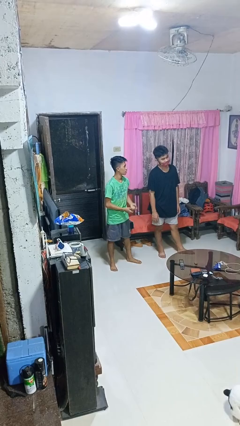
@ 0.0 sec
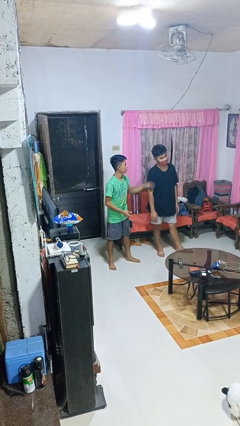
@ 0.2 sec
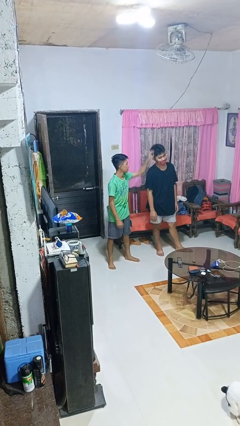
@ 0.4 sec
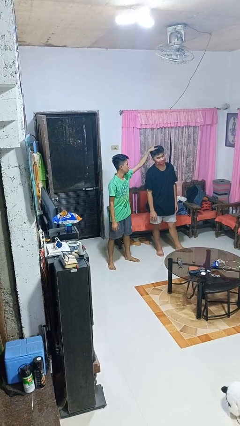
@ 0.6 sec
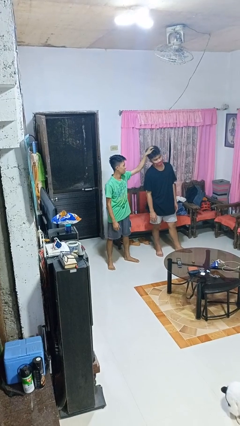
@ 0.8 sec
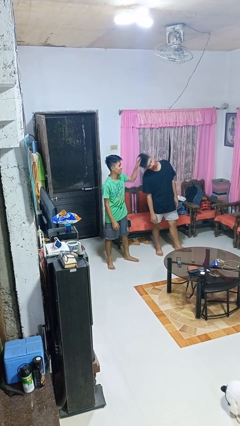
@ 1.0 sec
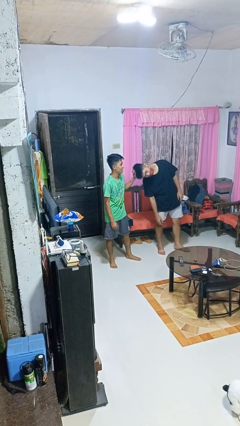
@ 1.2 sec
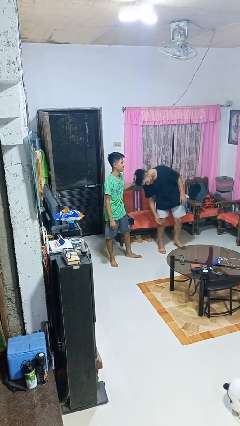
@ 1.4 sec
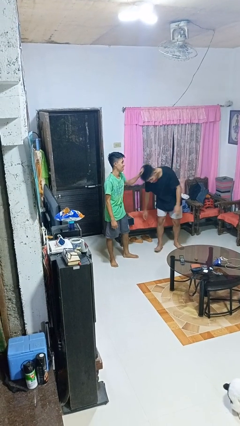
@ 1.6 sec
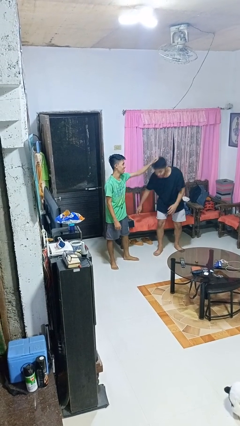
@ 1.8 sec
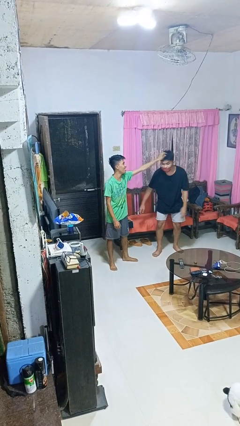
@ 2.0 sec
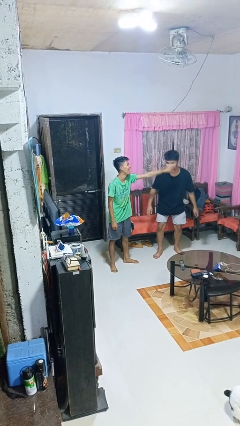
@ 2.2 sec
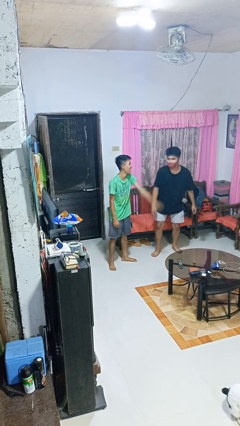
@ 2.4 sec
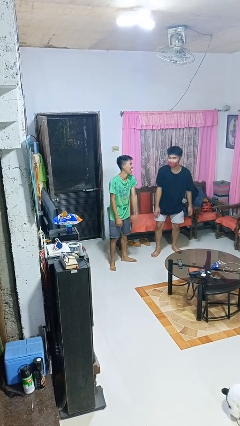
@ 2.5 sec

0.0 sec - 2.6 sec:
person grabs person by hair

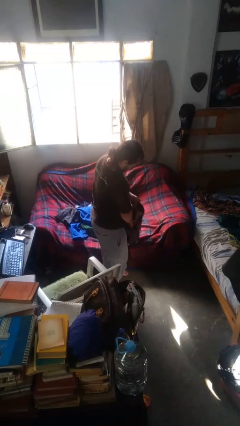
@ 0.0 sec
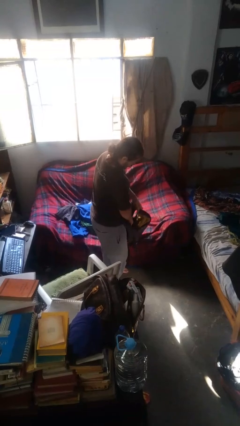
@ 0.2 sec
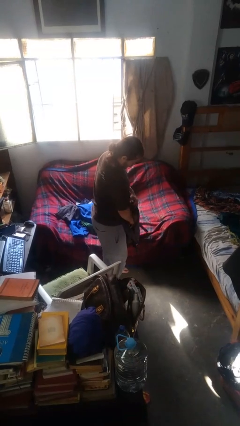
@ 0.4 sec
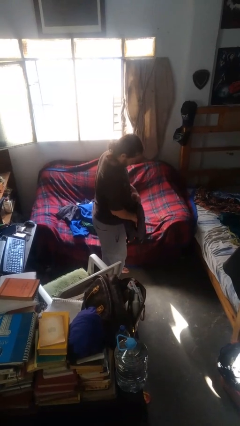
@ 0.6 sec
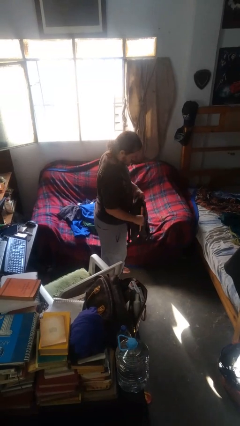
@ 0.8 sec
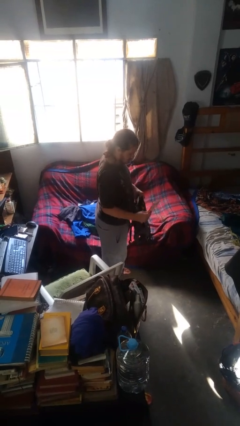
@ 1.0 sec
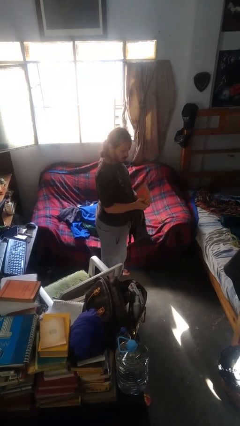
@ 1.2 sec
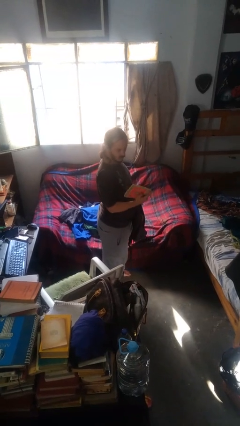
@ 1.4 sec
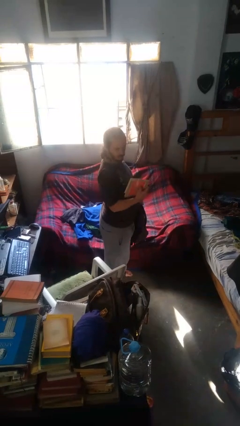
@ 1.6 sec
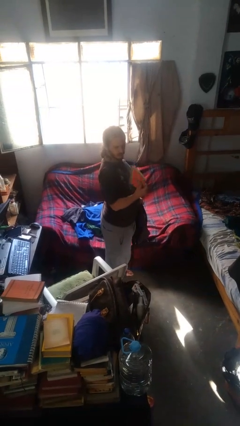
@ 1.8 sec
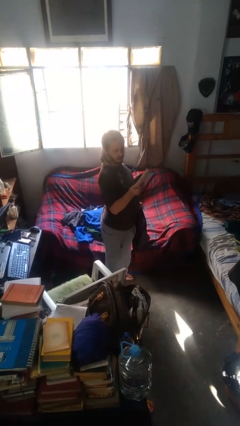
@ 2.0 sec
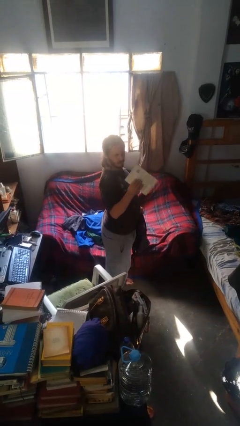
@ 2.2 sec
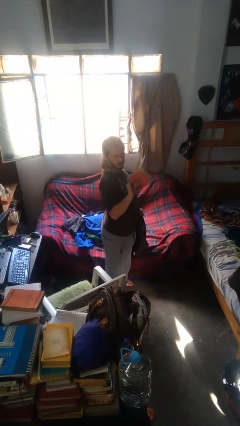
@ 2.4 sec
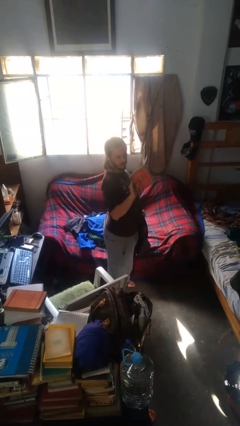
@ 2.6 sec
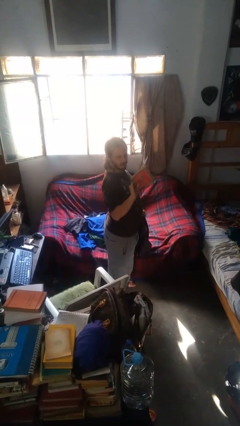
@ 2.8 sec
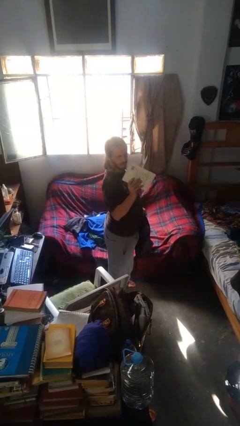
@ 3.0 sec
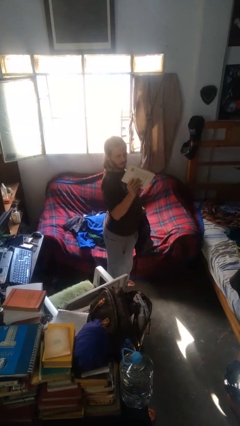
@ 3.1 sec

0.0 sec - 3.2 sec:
person takes object from backpack

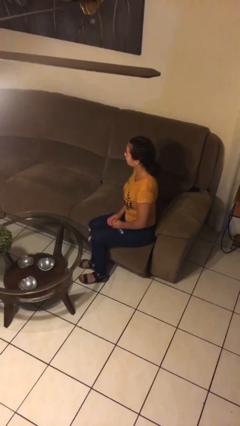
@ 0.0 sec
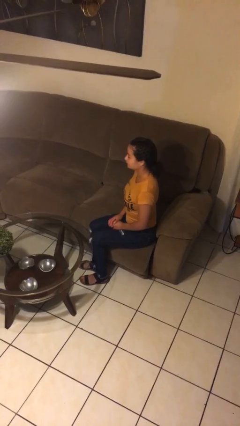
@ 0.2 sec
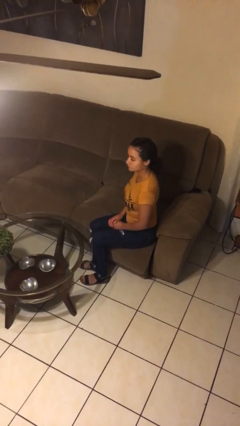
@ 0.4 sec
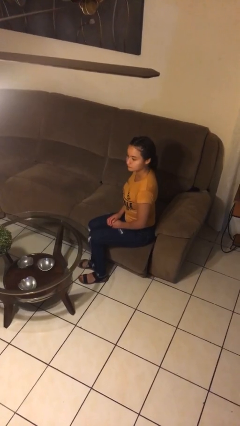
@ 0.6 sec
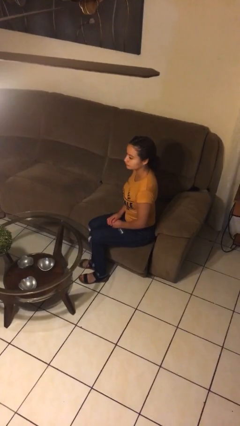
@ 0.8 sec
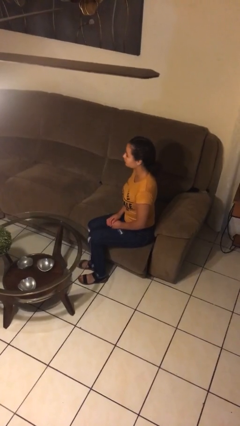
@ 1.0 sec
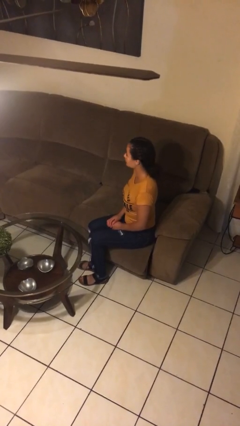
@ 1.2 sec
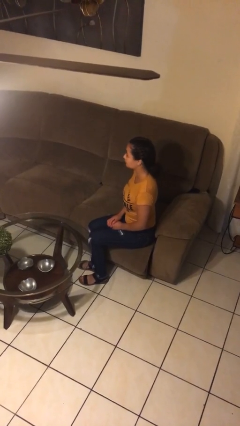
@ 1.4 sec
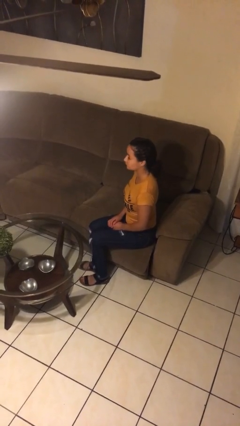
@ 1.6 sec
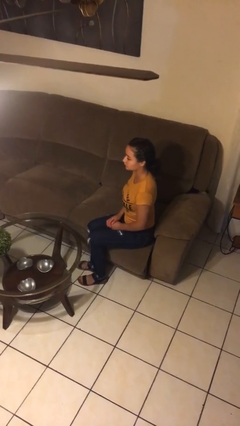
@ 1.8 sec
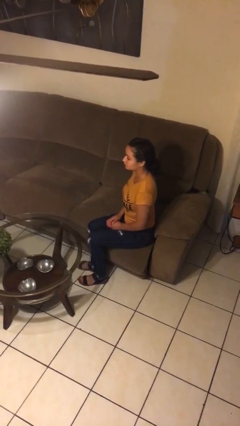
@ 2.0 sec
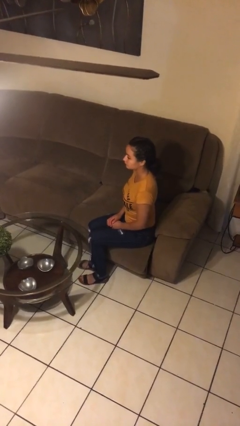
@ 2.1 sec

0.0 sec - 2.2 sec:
person shakes head

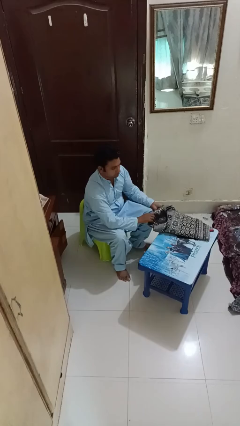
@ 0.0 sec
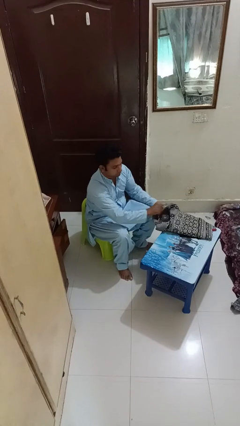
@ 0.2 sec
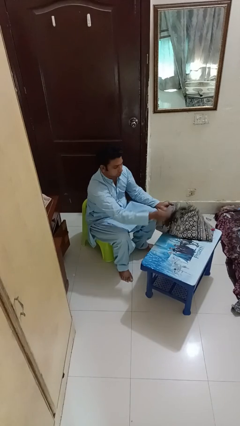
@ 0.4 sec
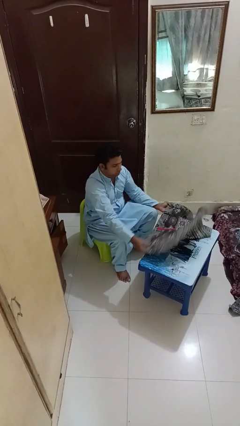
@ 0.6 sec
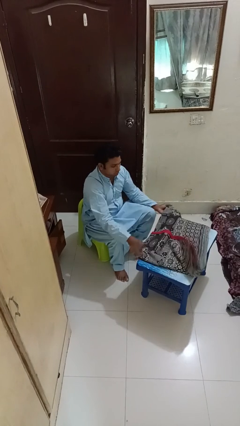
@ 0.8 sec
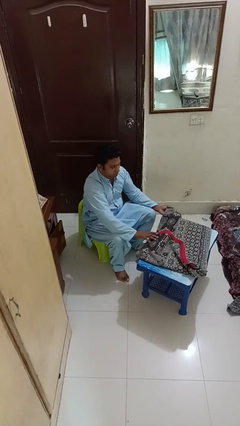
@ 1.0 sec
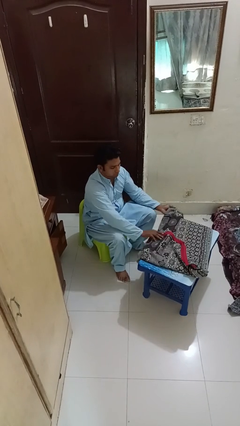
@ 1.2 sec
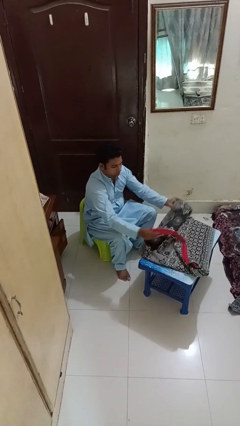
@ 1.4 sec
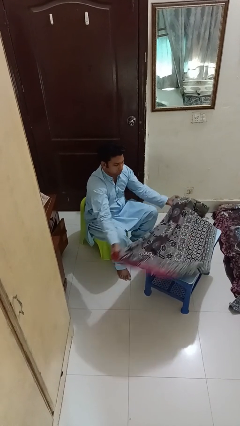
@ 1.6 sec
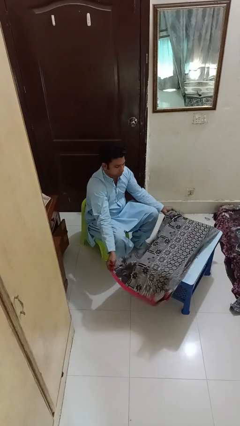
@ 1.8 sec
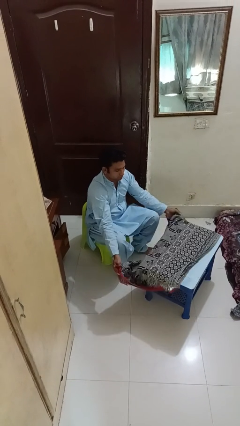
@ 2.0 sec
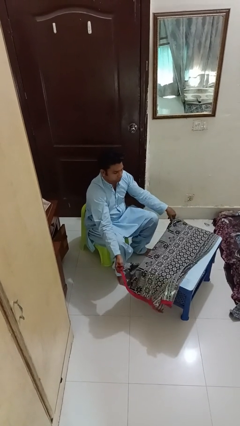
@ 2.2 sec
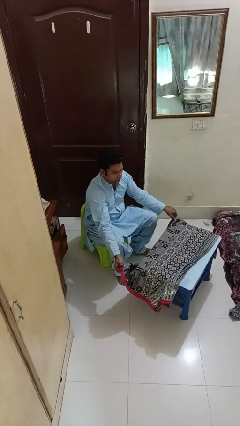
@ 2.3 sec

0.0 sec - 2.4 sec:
person unfolds blanket

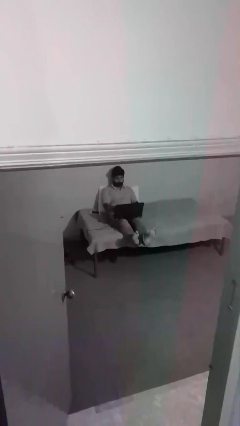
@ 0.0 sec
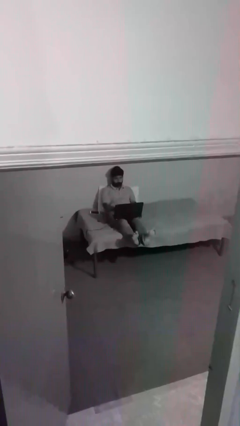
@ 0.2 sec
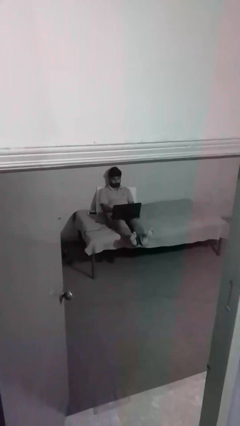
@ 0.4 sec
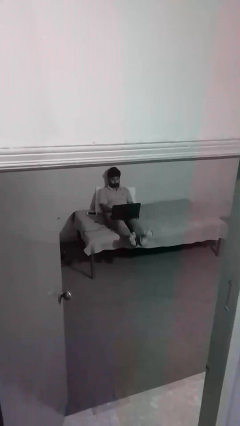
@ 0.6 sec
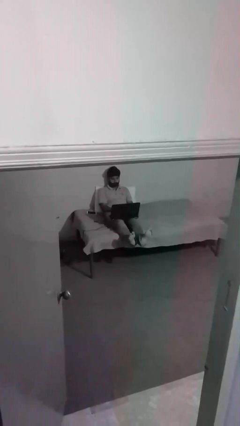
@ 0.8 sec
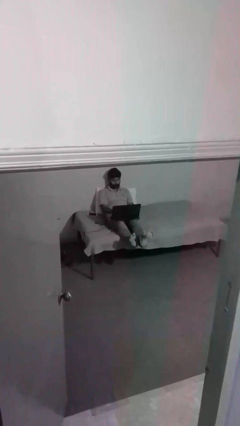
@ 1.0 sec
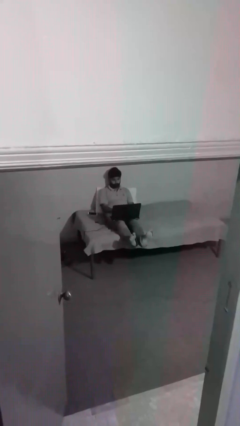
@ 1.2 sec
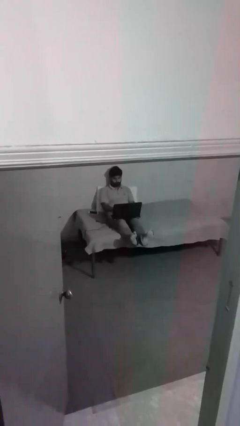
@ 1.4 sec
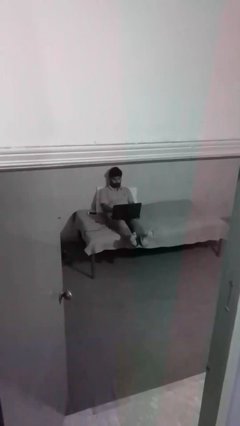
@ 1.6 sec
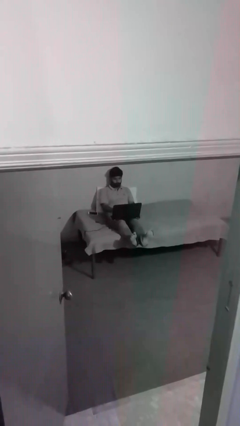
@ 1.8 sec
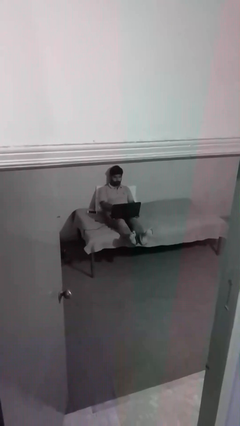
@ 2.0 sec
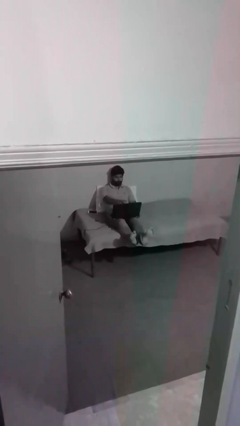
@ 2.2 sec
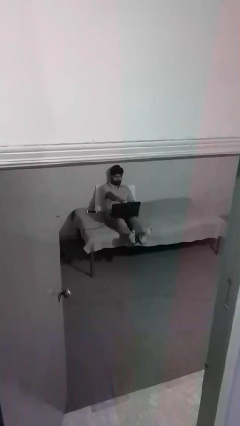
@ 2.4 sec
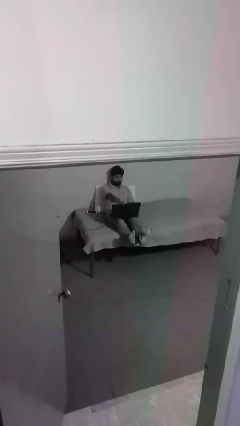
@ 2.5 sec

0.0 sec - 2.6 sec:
person interacts with laptop

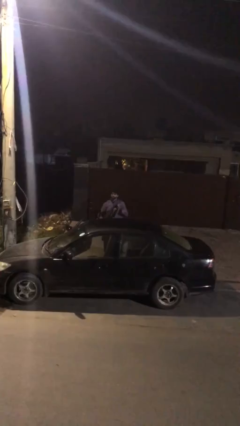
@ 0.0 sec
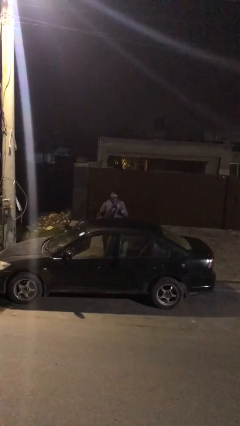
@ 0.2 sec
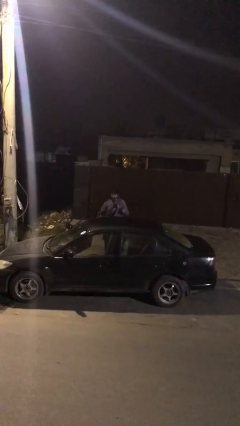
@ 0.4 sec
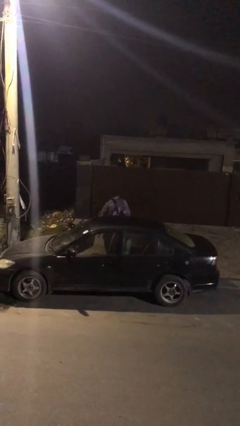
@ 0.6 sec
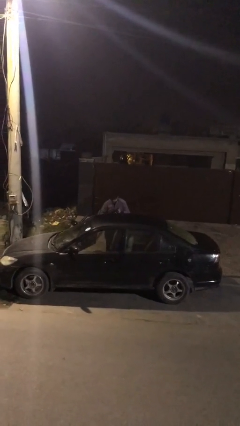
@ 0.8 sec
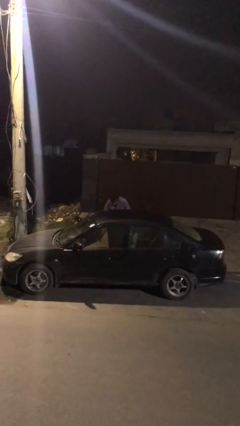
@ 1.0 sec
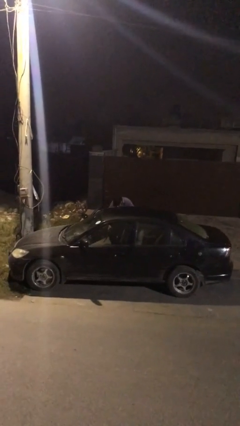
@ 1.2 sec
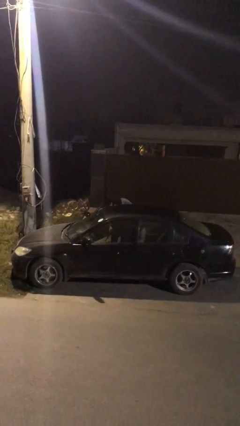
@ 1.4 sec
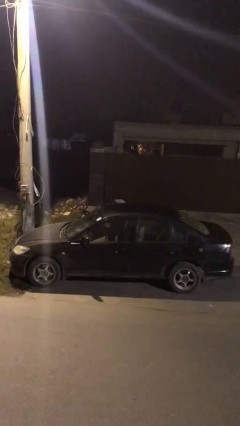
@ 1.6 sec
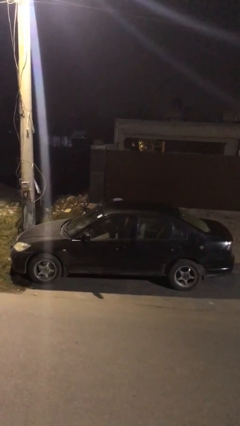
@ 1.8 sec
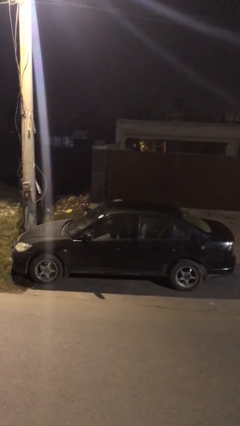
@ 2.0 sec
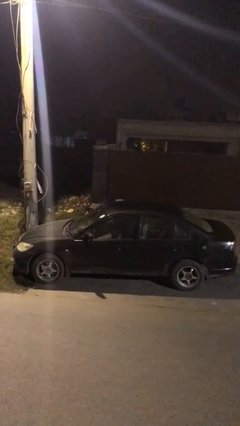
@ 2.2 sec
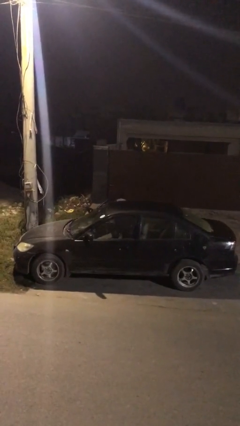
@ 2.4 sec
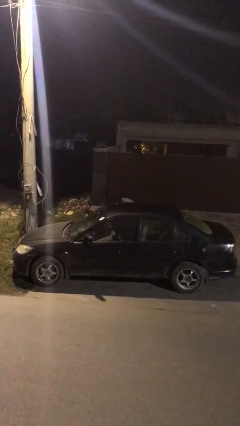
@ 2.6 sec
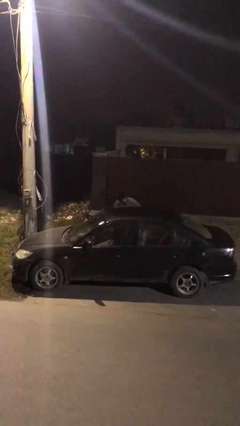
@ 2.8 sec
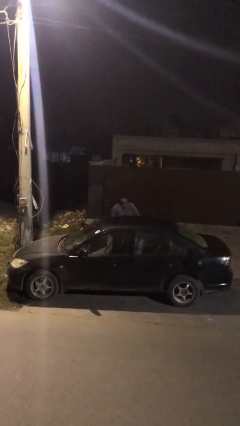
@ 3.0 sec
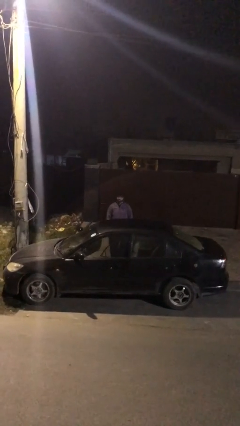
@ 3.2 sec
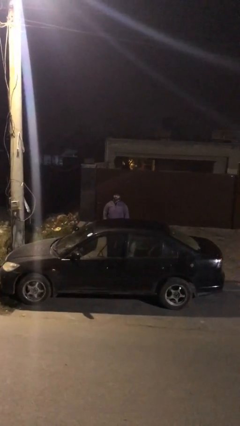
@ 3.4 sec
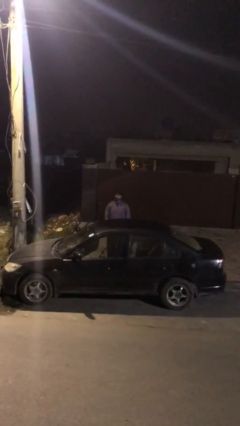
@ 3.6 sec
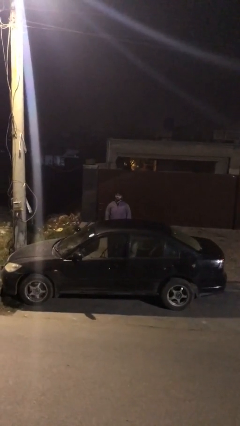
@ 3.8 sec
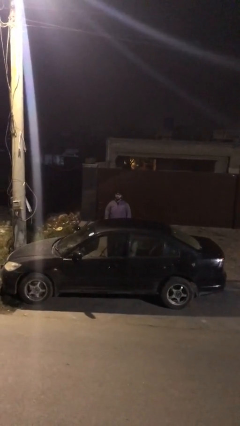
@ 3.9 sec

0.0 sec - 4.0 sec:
person loads car

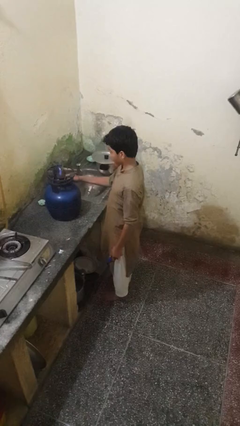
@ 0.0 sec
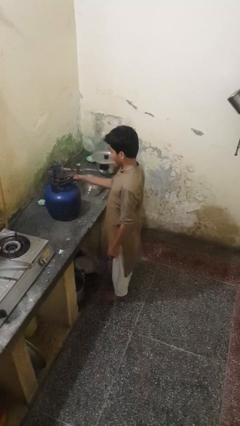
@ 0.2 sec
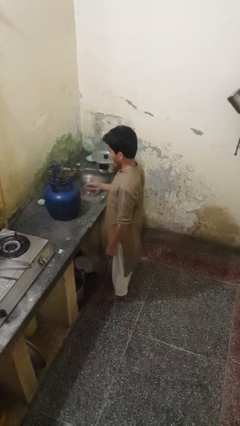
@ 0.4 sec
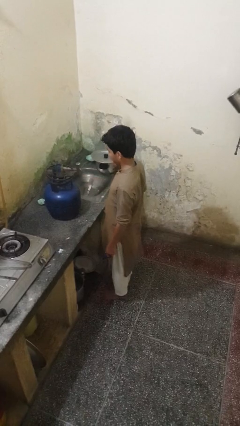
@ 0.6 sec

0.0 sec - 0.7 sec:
person turns off stovetop
